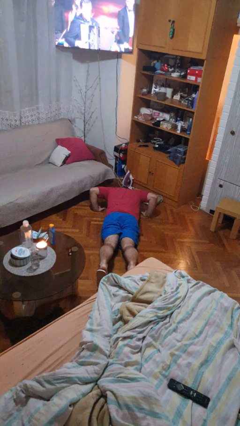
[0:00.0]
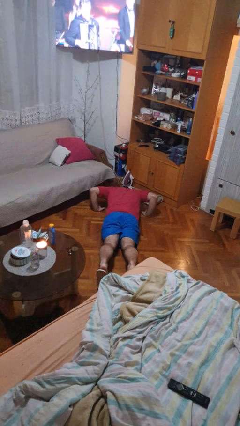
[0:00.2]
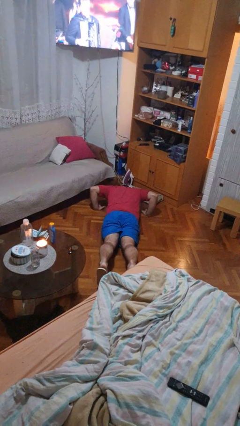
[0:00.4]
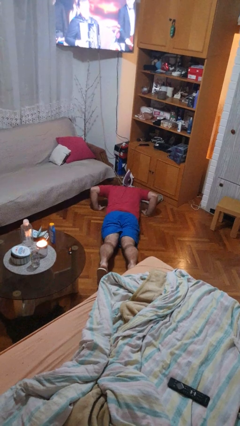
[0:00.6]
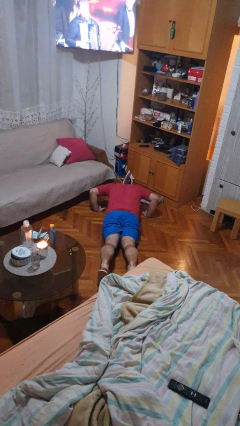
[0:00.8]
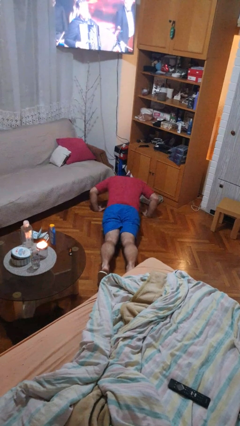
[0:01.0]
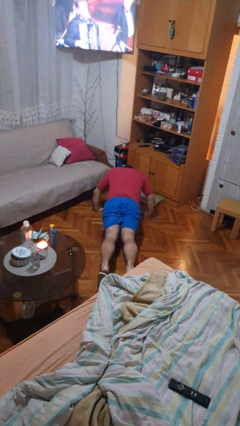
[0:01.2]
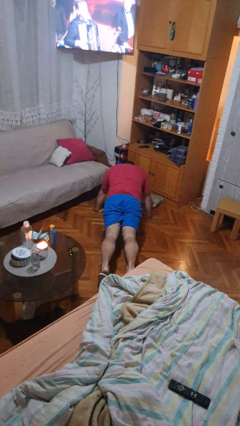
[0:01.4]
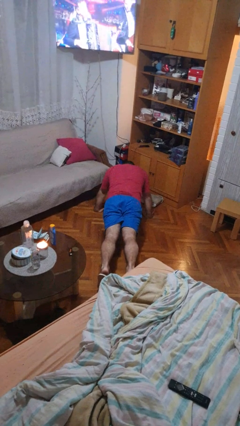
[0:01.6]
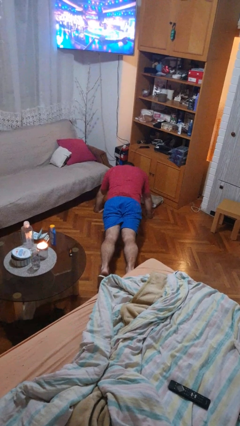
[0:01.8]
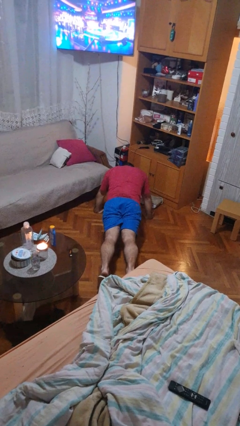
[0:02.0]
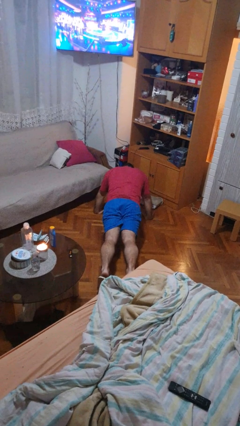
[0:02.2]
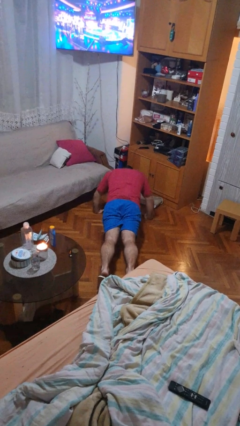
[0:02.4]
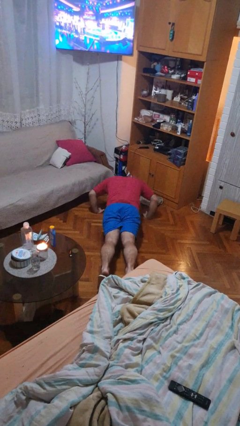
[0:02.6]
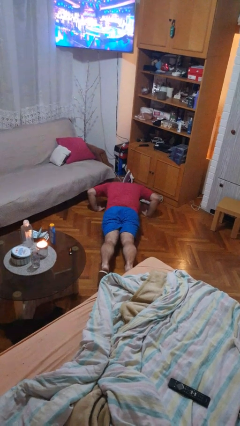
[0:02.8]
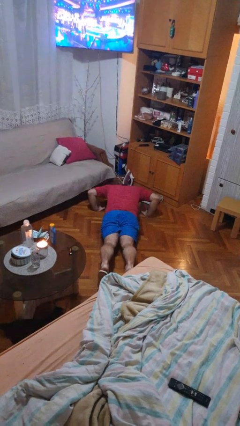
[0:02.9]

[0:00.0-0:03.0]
person exercises with pushup

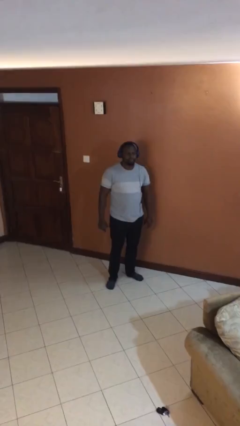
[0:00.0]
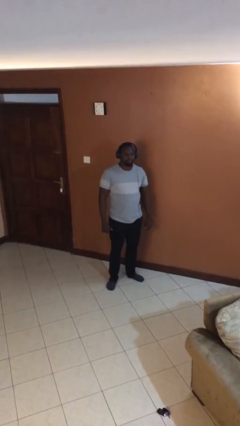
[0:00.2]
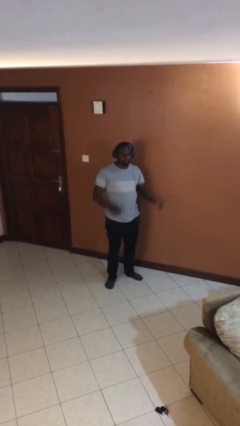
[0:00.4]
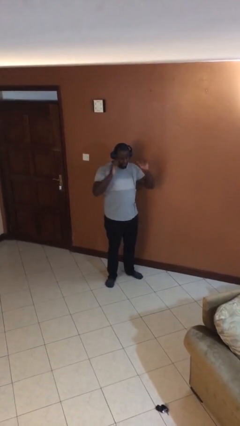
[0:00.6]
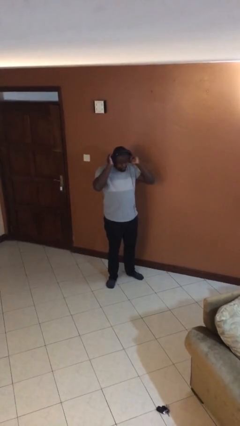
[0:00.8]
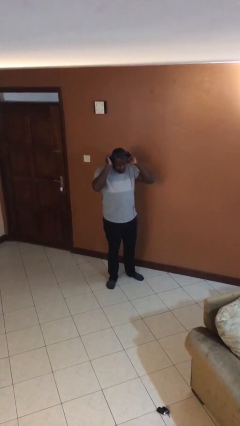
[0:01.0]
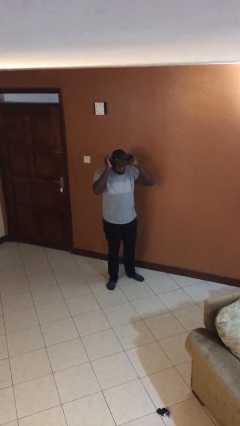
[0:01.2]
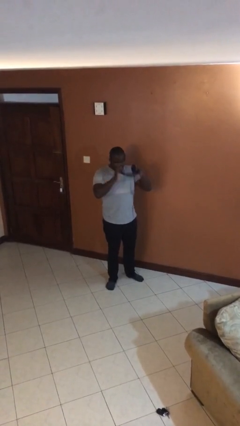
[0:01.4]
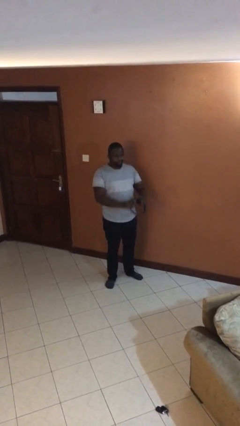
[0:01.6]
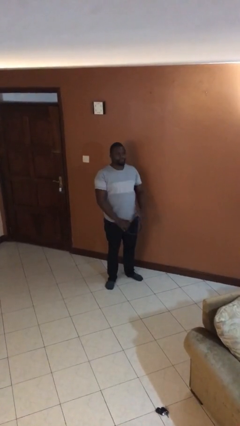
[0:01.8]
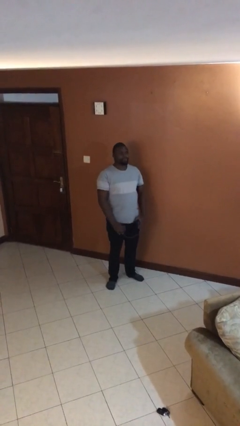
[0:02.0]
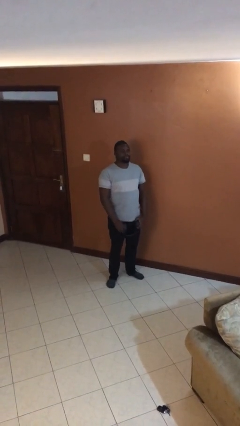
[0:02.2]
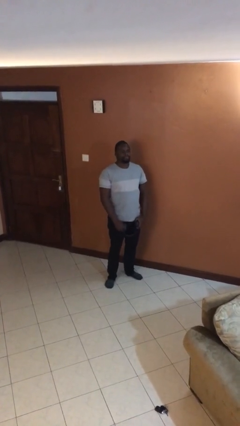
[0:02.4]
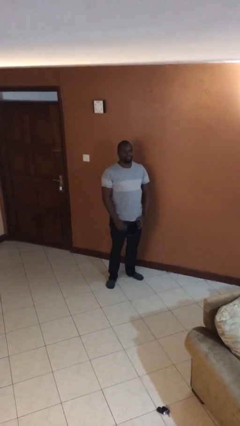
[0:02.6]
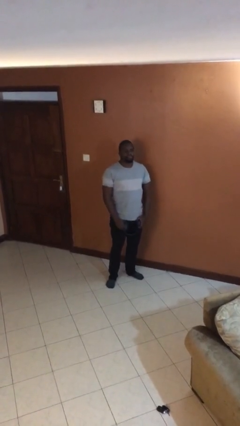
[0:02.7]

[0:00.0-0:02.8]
person takes off headphones

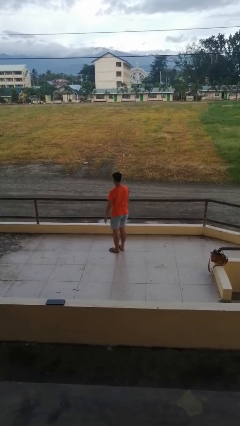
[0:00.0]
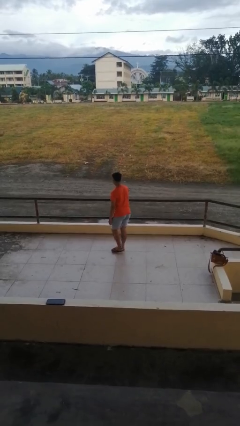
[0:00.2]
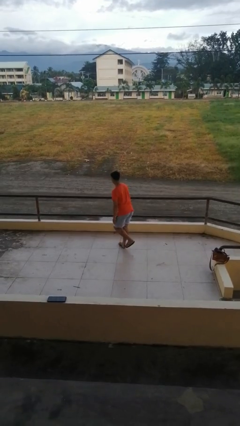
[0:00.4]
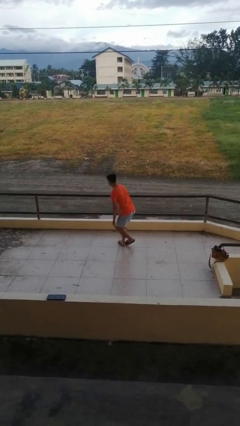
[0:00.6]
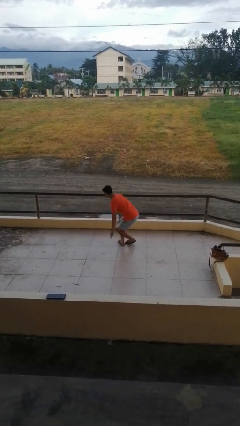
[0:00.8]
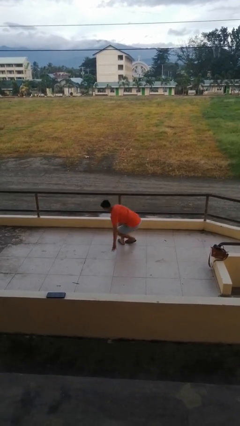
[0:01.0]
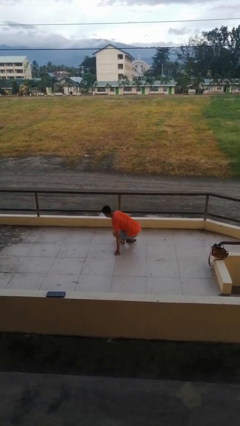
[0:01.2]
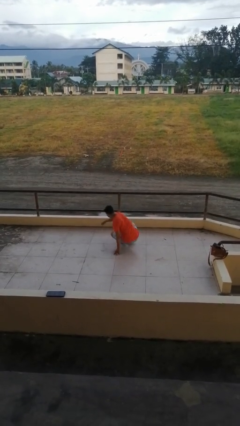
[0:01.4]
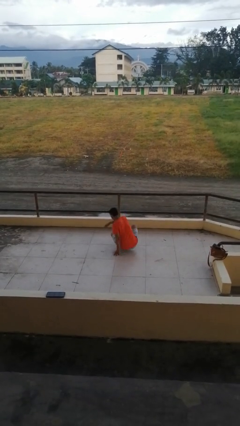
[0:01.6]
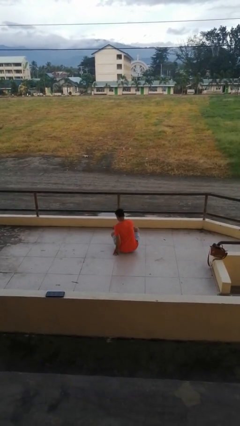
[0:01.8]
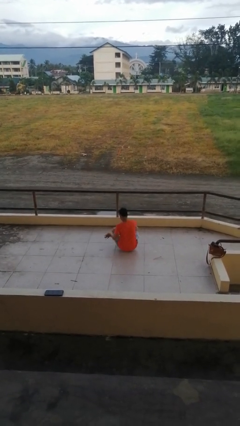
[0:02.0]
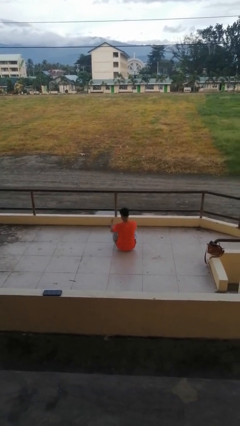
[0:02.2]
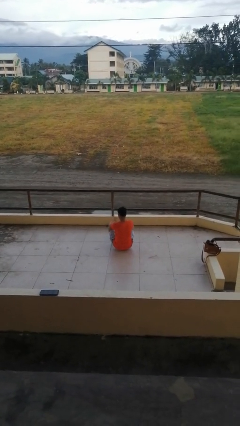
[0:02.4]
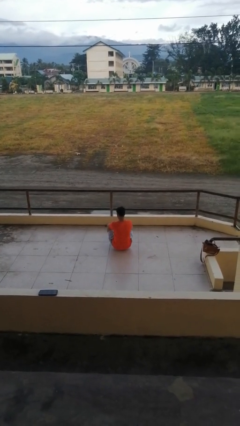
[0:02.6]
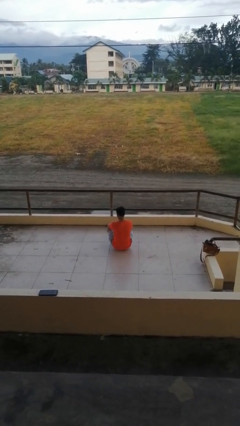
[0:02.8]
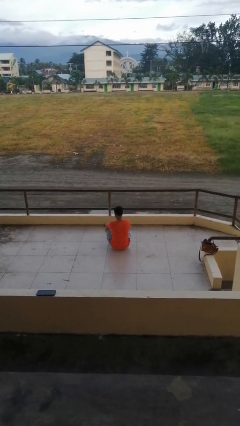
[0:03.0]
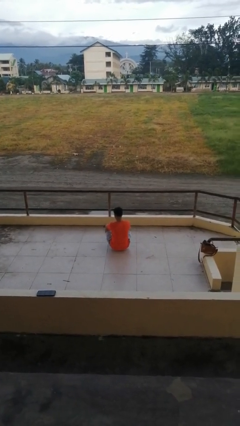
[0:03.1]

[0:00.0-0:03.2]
person sits crisscross

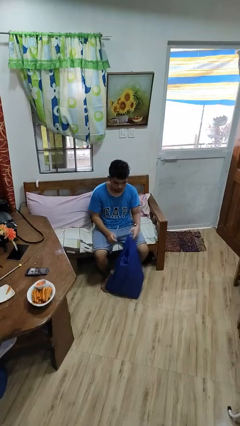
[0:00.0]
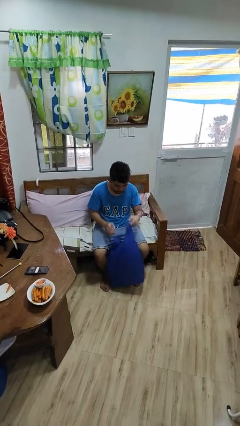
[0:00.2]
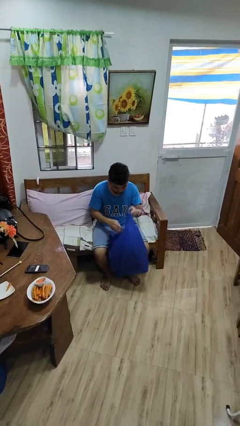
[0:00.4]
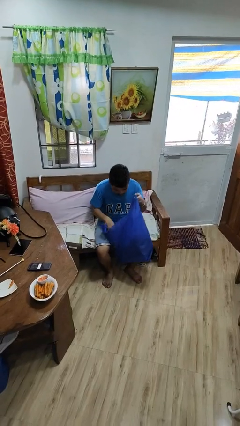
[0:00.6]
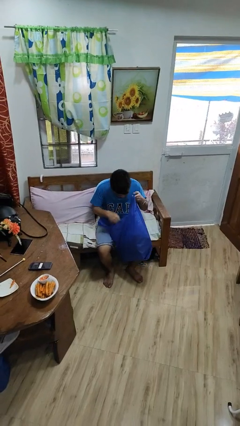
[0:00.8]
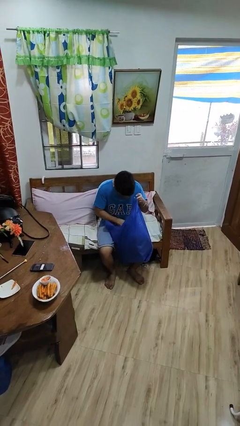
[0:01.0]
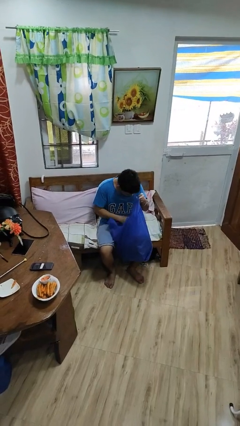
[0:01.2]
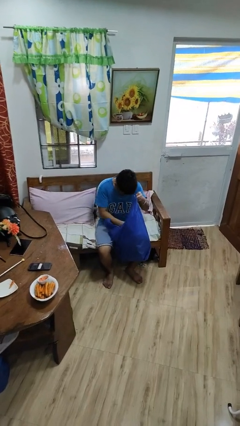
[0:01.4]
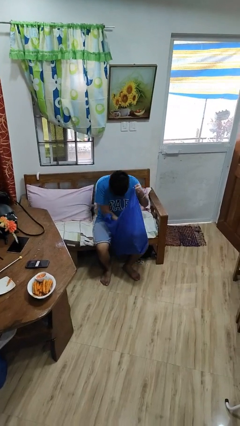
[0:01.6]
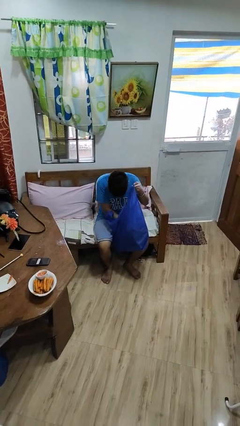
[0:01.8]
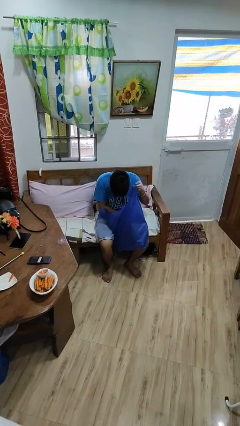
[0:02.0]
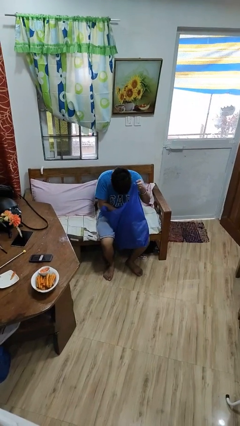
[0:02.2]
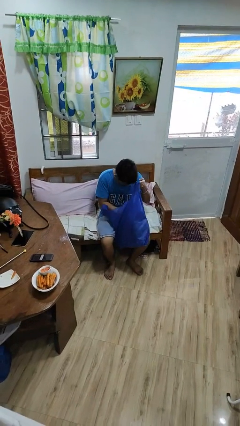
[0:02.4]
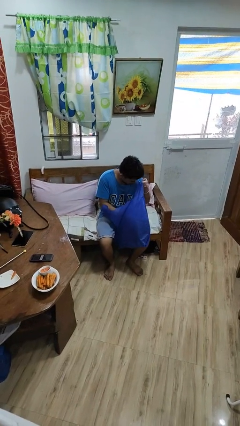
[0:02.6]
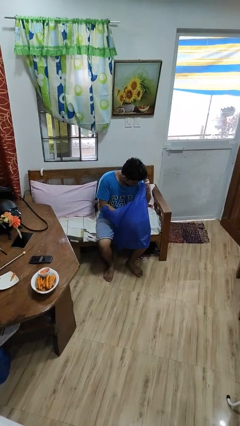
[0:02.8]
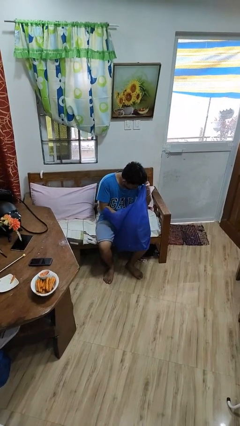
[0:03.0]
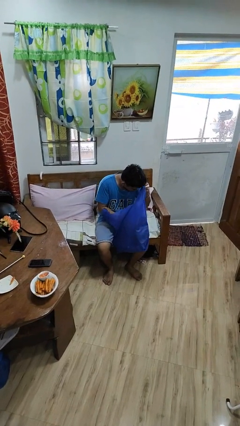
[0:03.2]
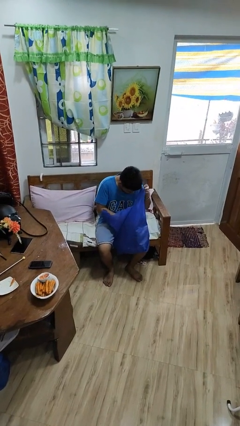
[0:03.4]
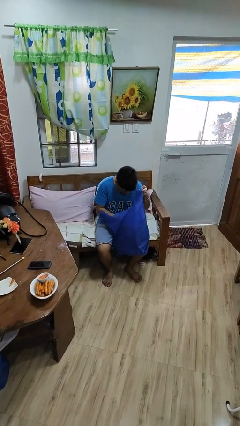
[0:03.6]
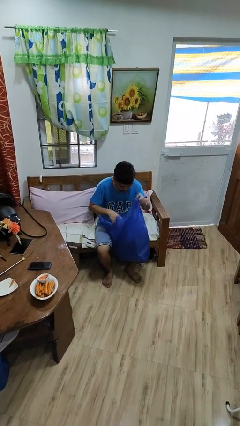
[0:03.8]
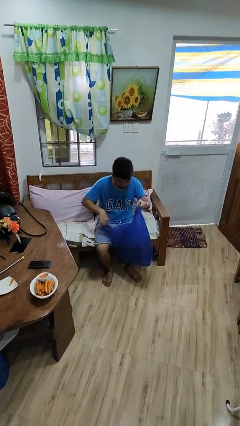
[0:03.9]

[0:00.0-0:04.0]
person searches in bag

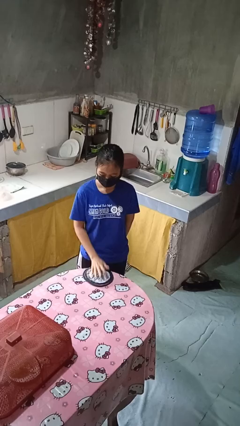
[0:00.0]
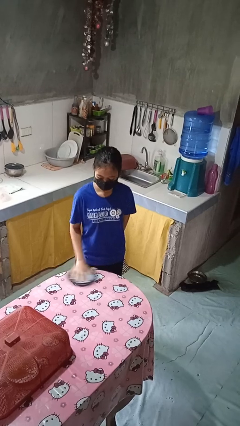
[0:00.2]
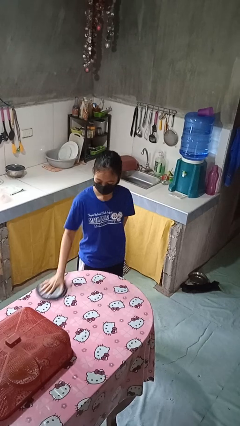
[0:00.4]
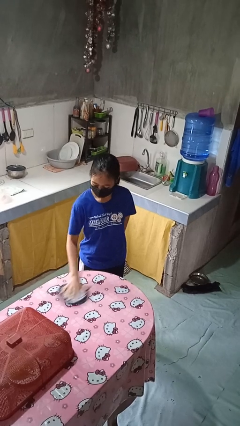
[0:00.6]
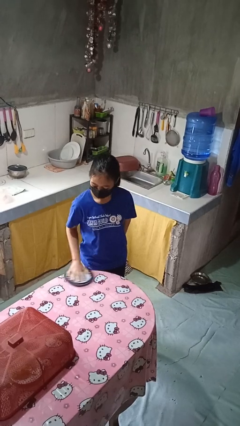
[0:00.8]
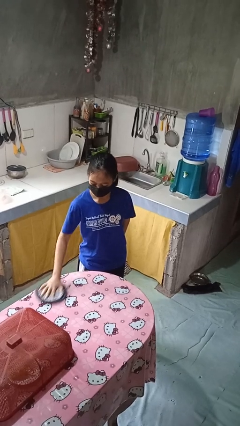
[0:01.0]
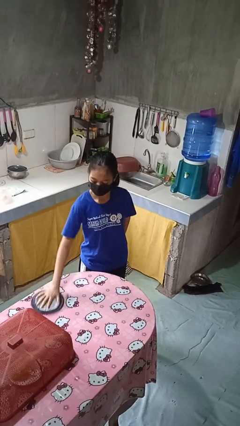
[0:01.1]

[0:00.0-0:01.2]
person cleans table with rag

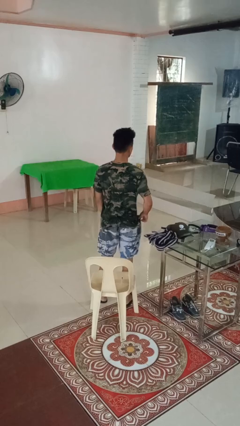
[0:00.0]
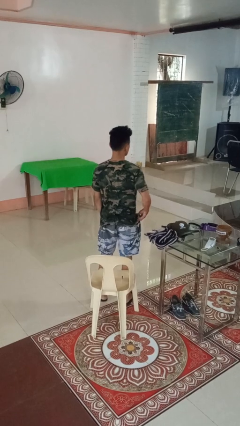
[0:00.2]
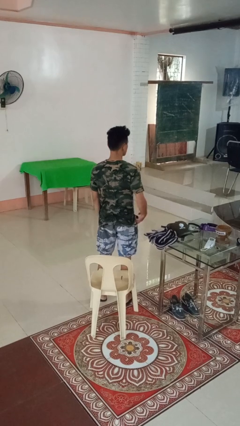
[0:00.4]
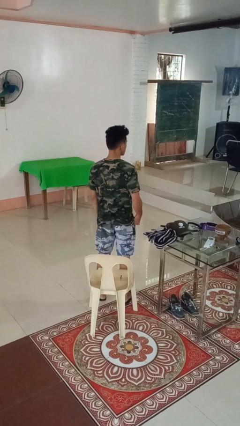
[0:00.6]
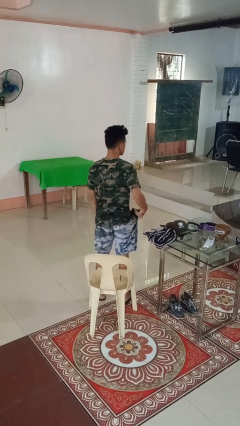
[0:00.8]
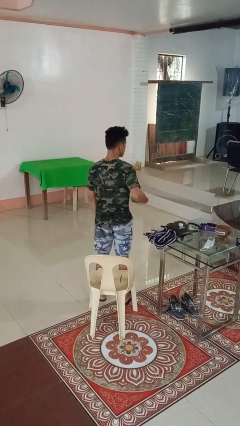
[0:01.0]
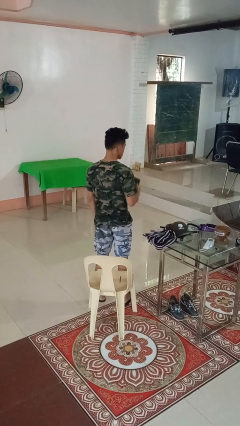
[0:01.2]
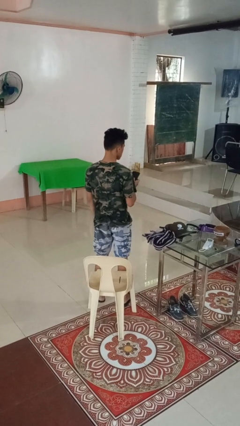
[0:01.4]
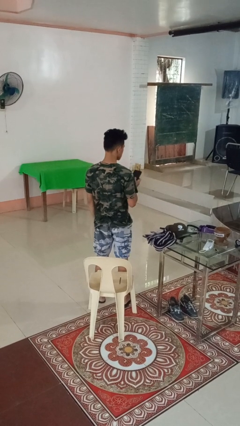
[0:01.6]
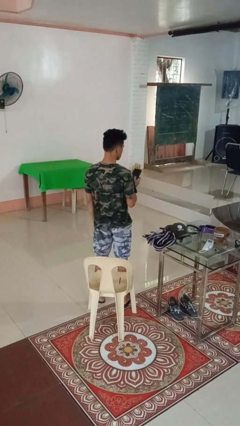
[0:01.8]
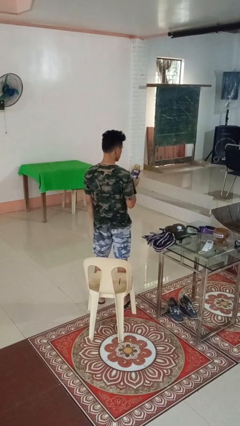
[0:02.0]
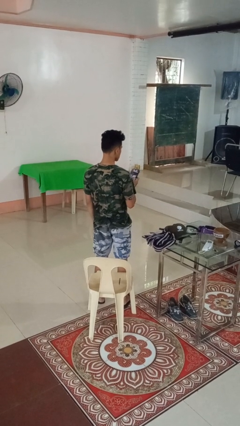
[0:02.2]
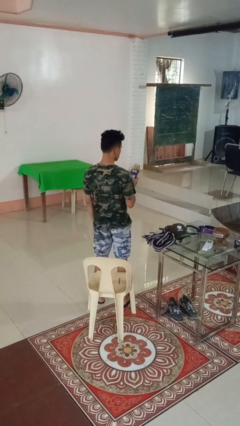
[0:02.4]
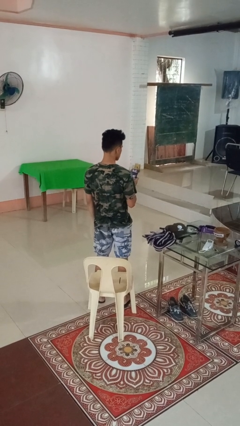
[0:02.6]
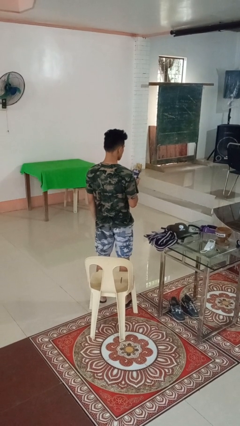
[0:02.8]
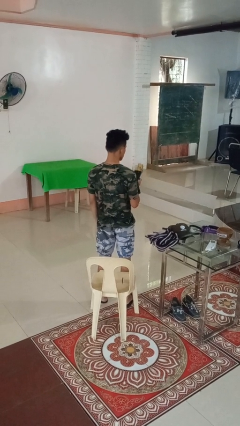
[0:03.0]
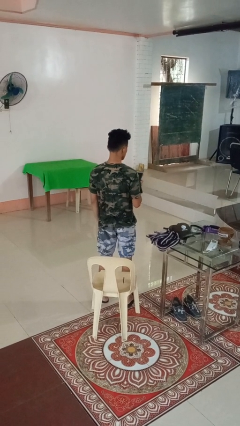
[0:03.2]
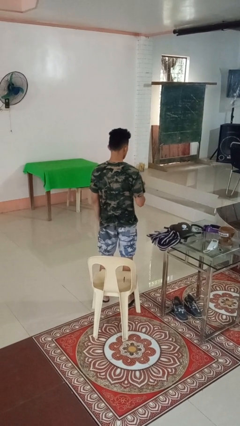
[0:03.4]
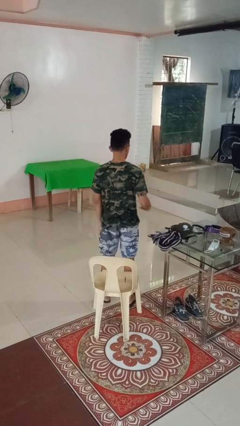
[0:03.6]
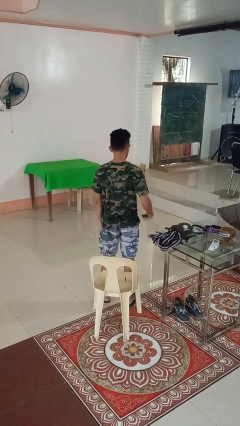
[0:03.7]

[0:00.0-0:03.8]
person takes phone from pocket
